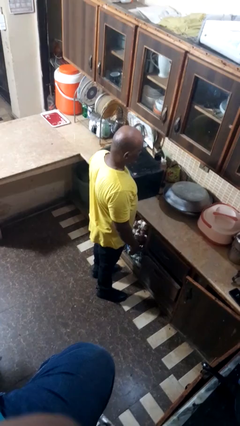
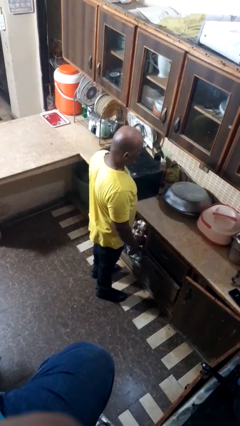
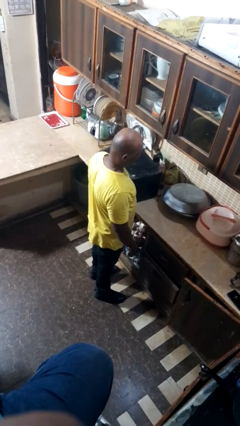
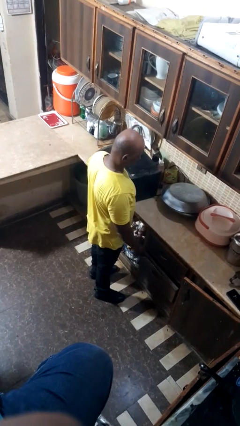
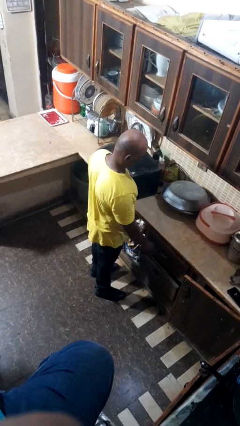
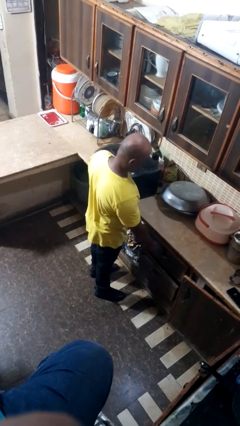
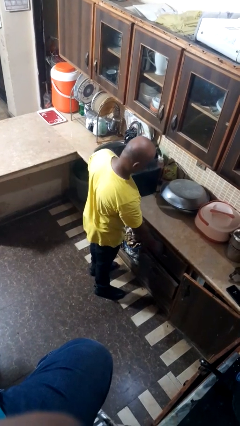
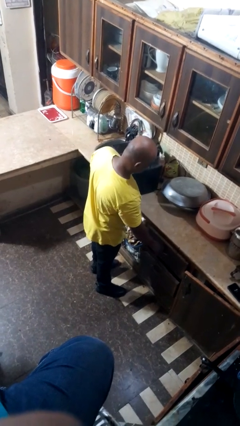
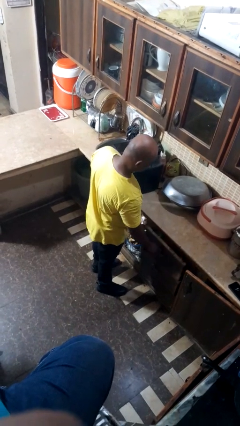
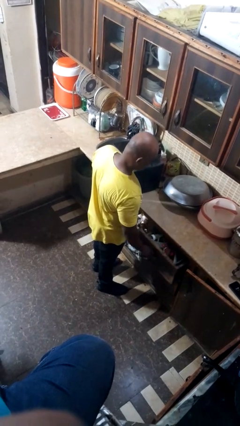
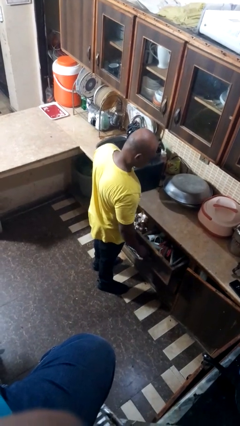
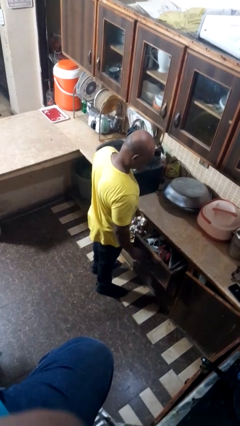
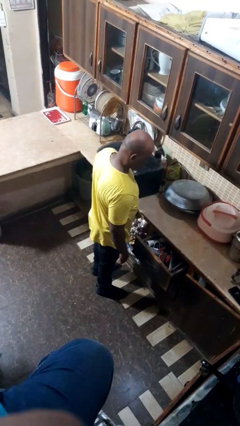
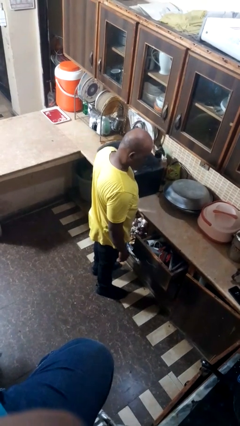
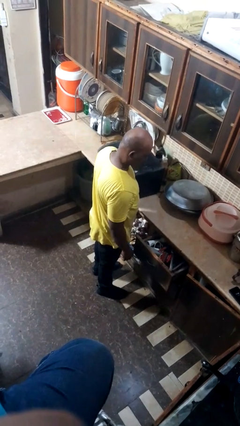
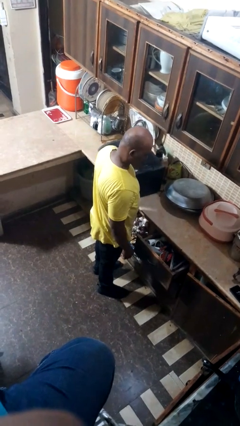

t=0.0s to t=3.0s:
person opens dresser drawer

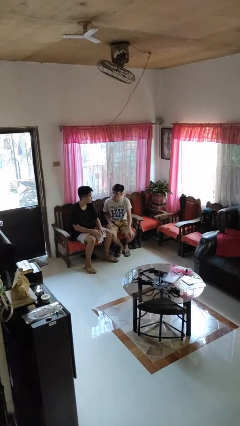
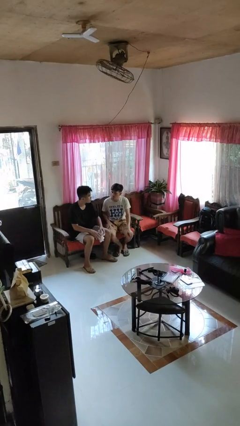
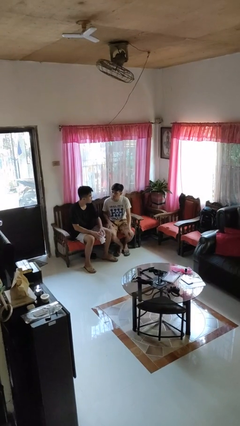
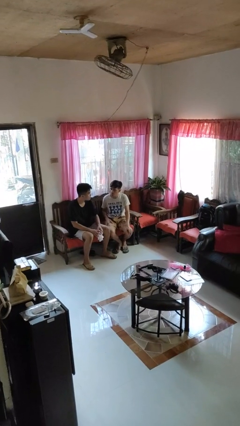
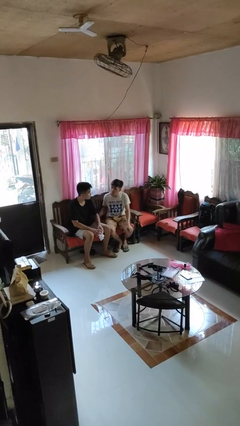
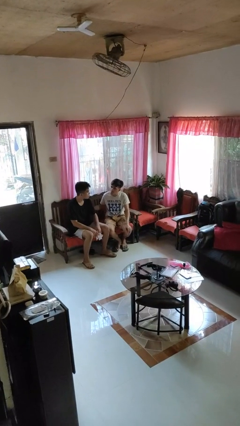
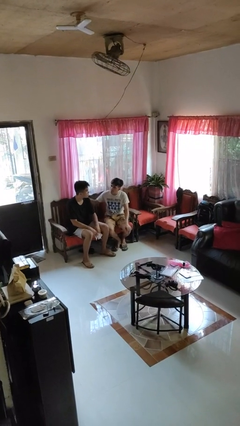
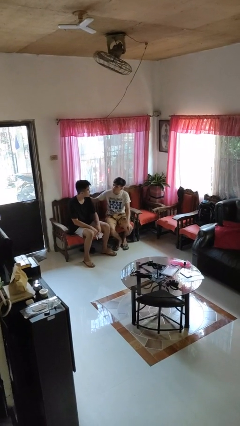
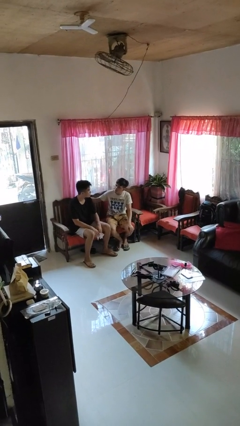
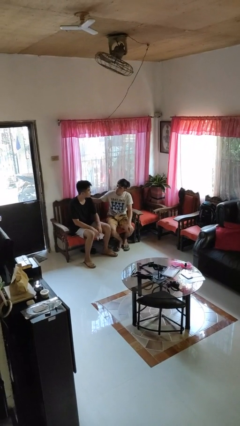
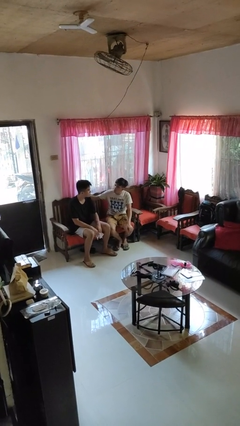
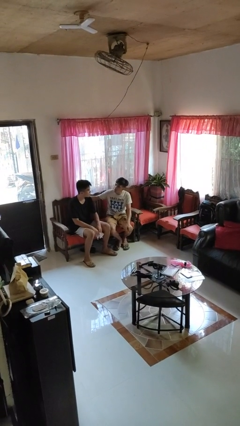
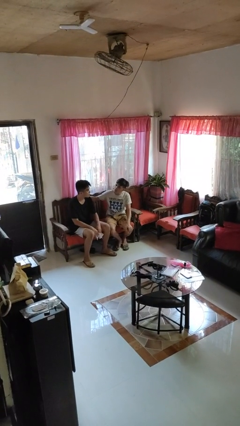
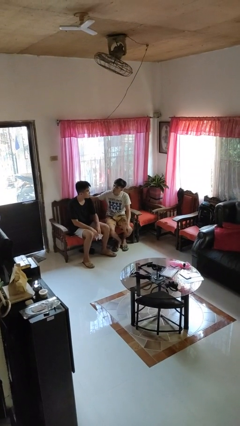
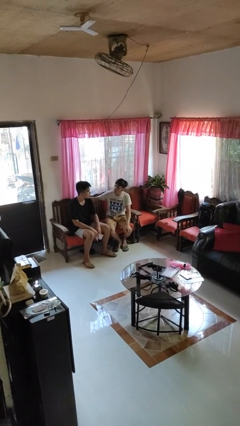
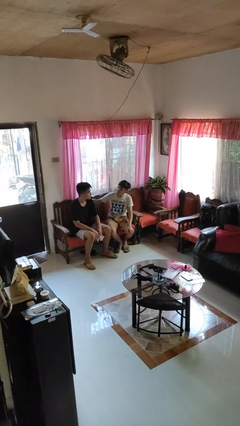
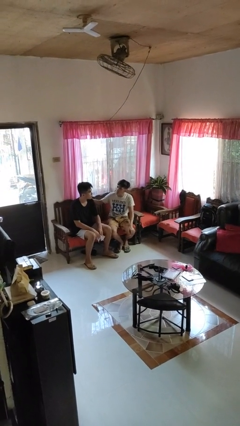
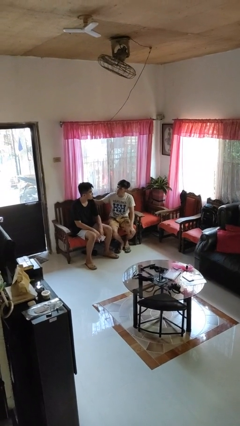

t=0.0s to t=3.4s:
person touches back of person

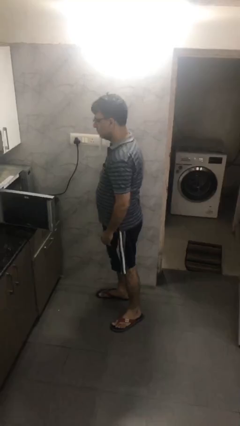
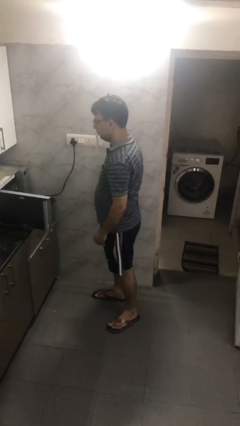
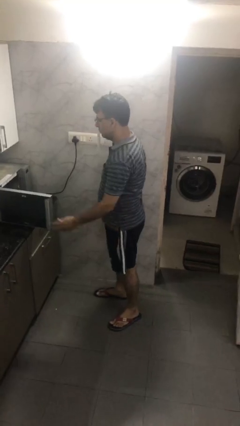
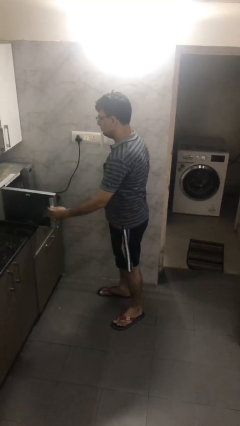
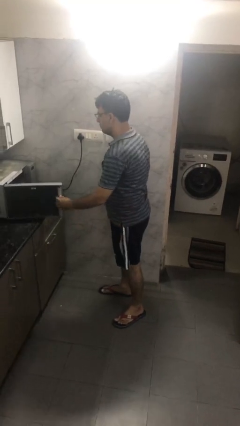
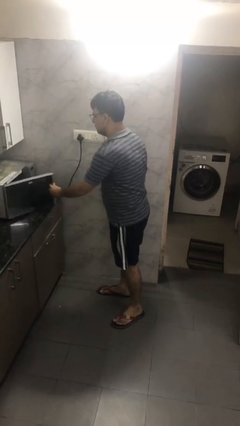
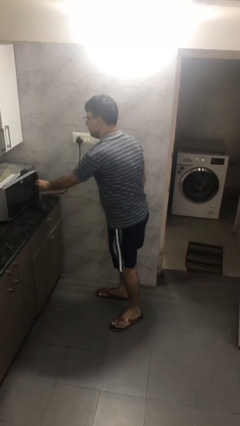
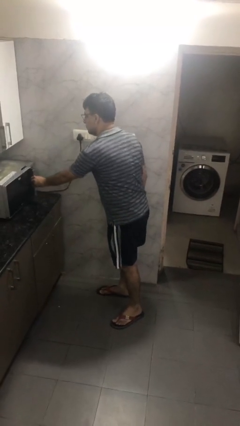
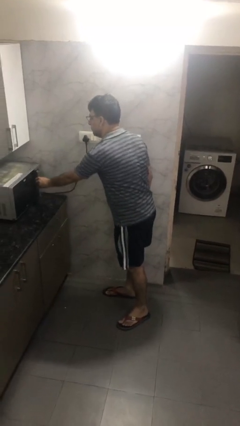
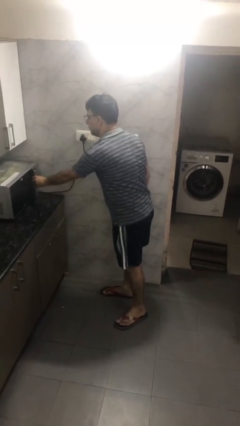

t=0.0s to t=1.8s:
person closes microwave

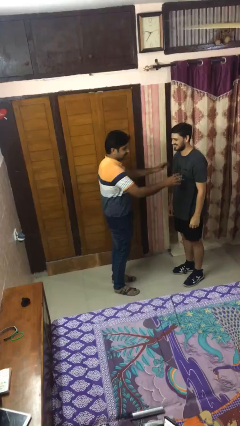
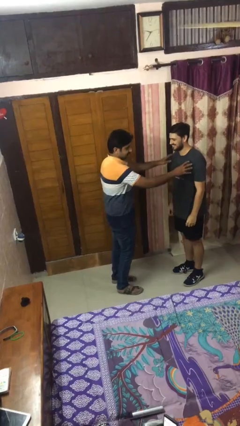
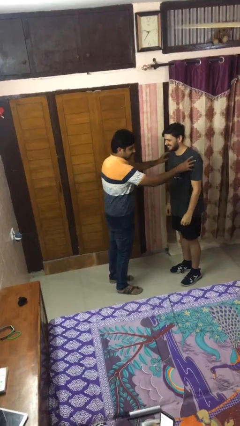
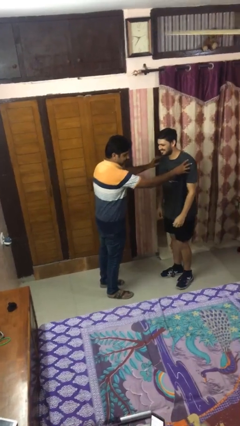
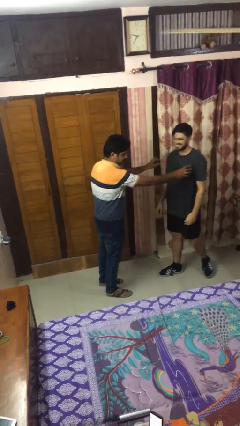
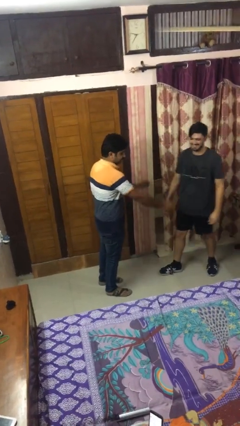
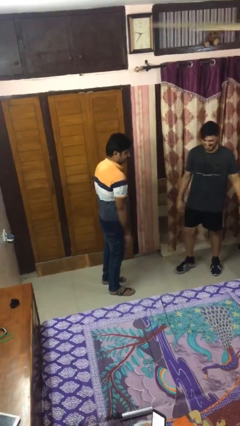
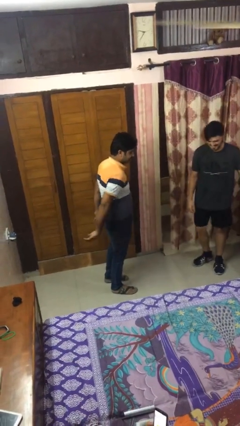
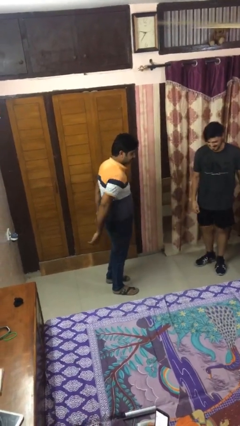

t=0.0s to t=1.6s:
person shoves person

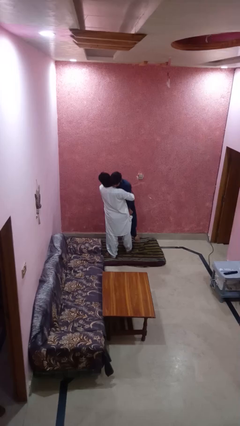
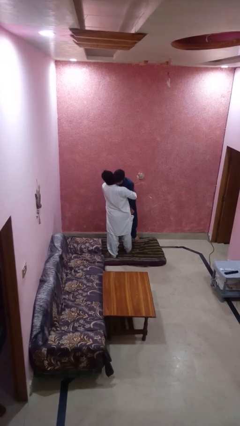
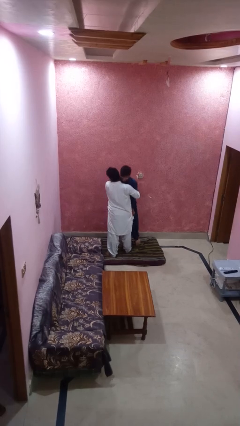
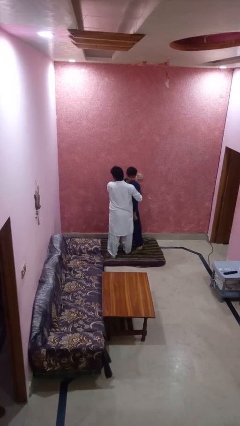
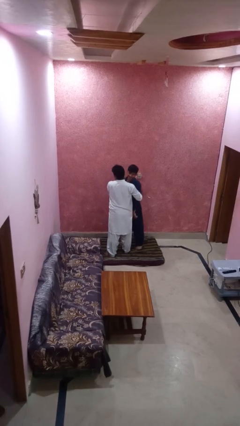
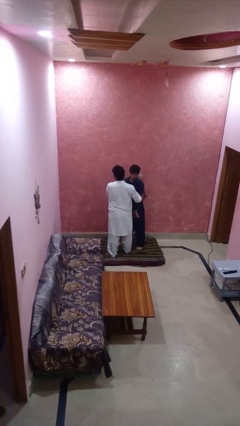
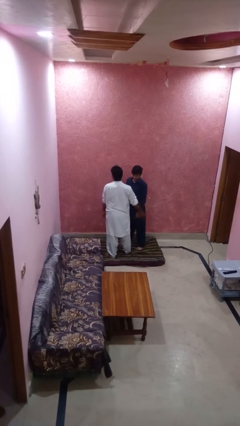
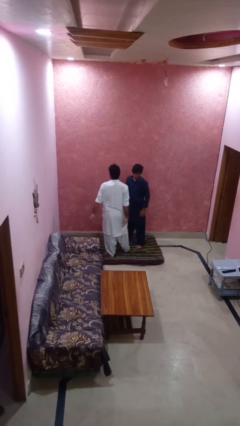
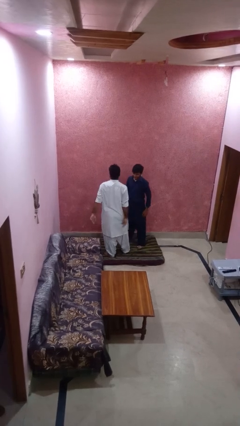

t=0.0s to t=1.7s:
person puts down person

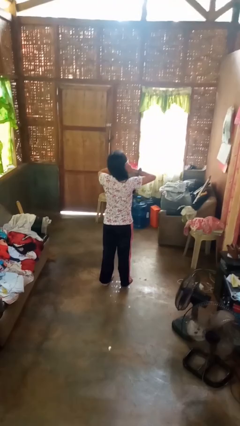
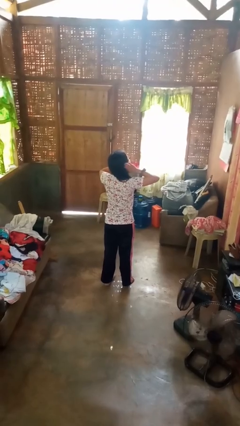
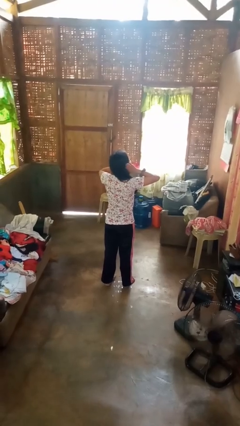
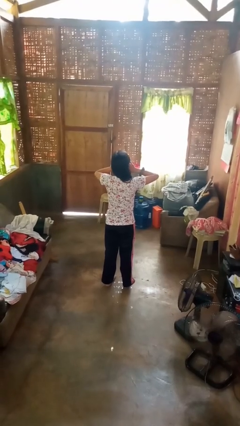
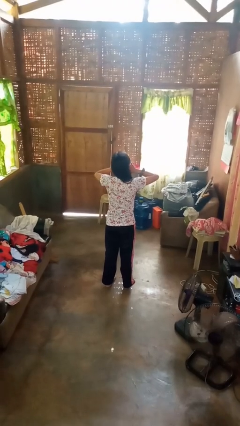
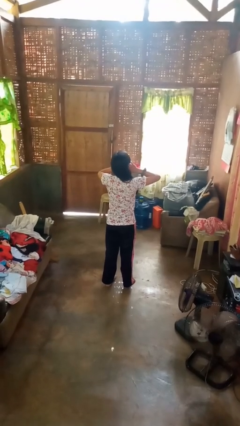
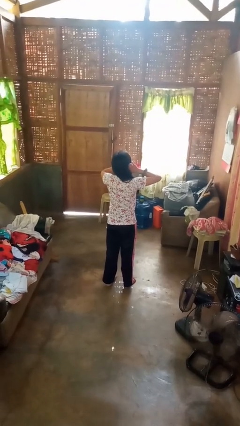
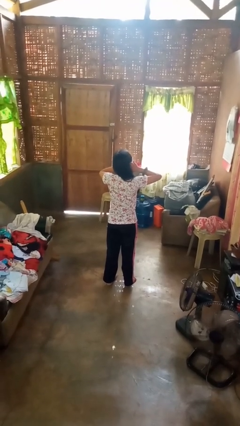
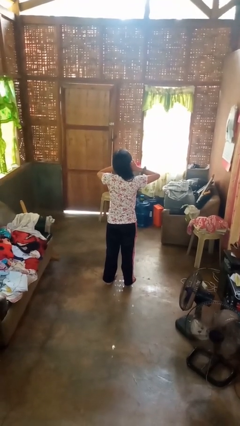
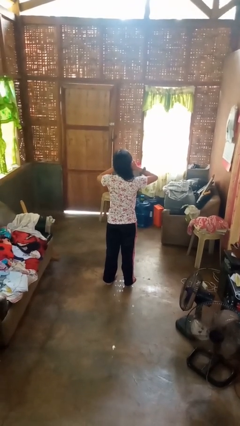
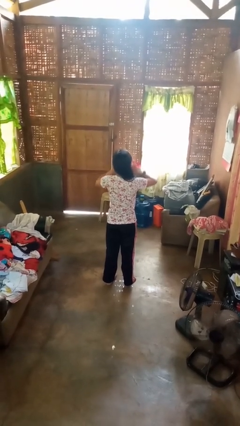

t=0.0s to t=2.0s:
person puts fingers in ear

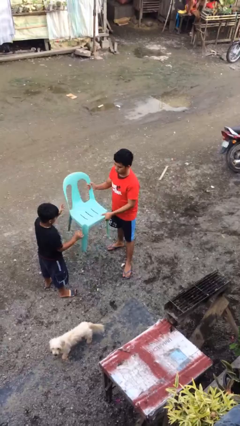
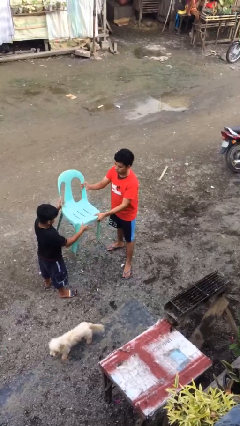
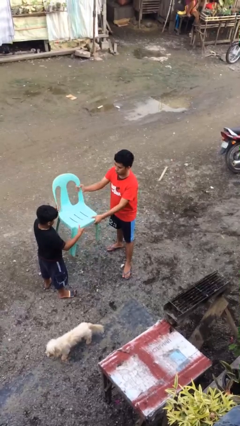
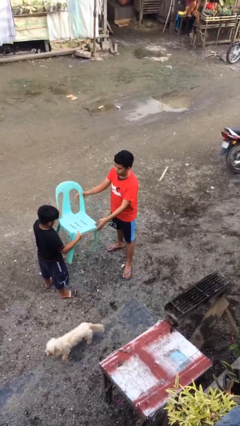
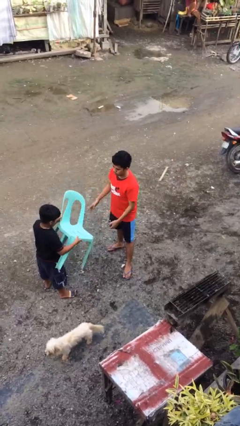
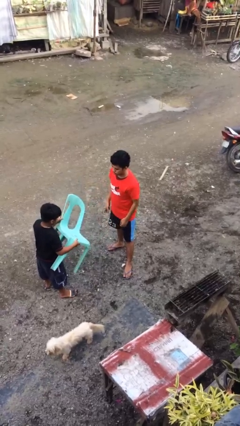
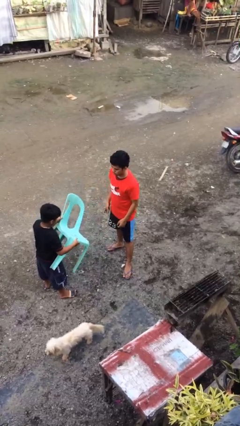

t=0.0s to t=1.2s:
person transfers object to person

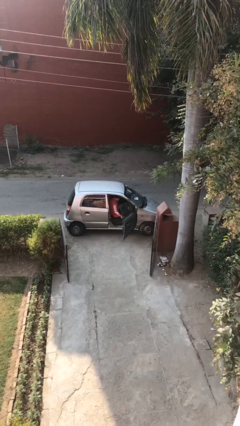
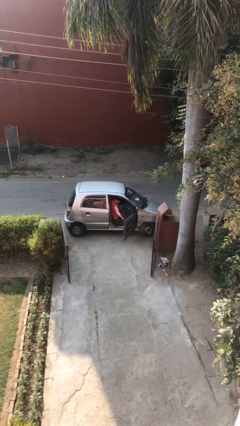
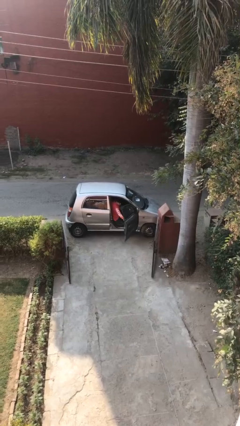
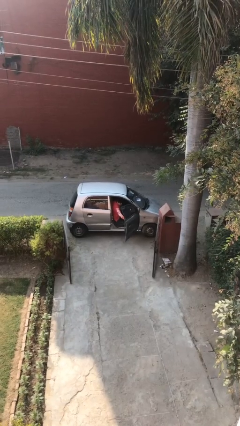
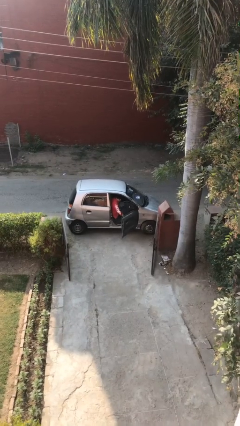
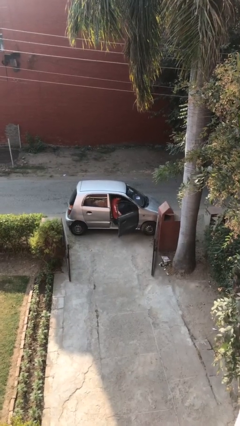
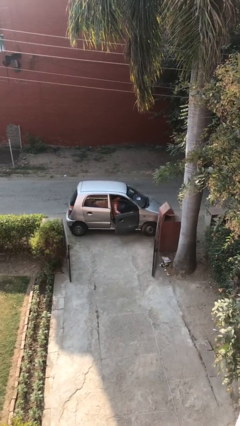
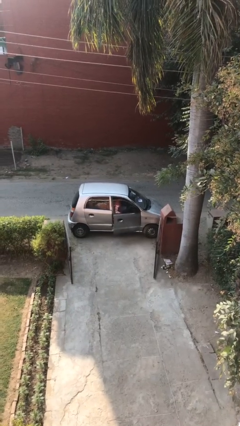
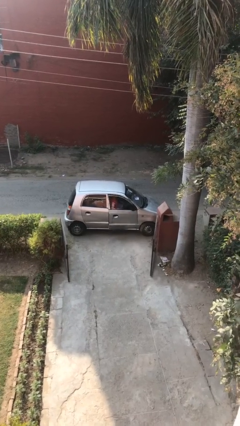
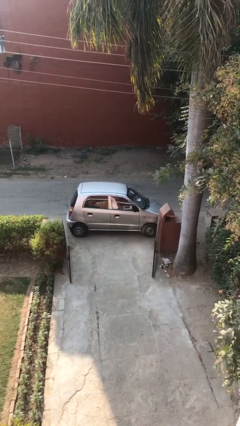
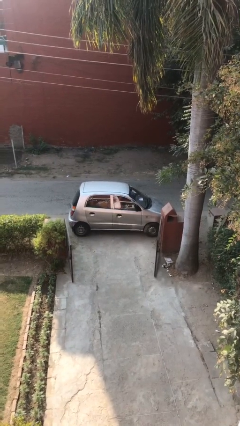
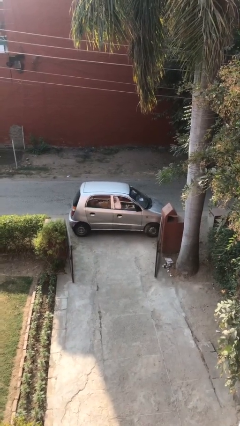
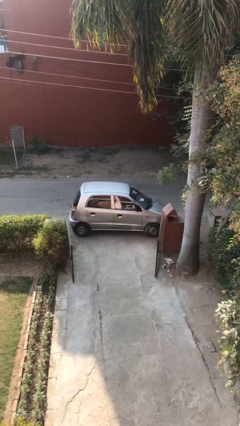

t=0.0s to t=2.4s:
person closes car door

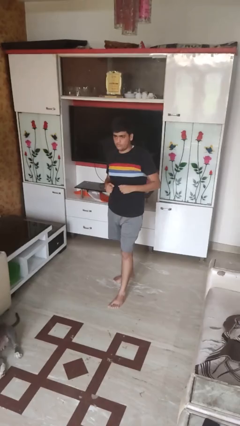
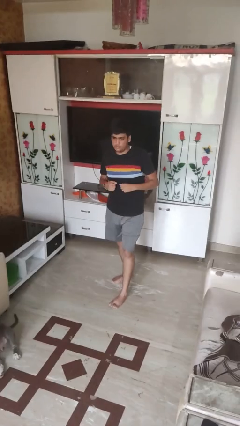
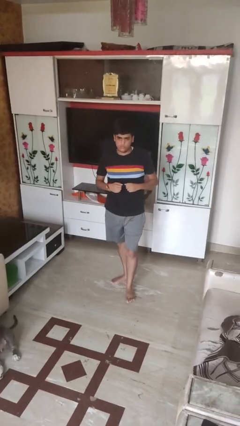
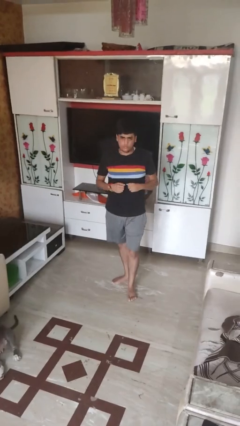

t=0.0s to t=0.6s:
person punches
